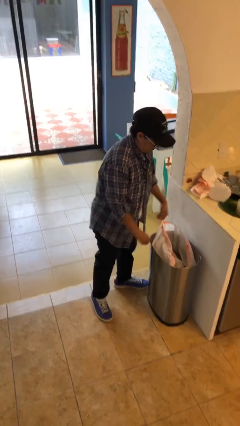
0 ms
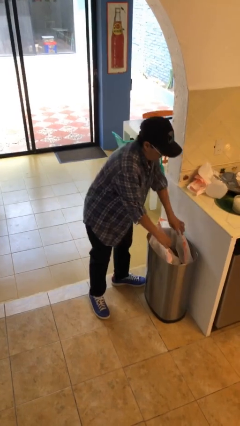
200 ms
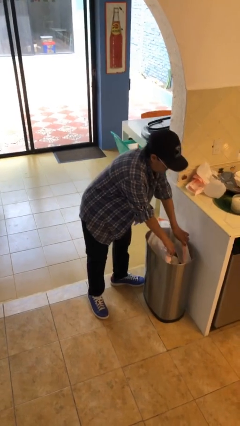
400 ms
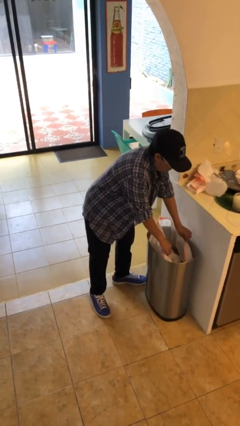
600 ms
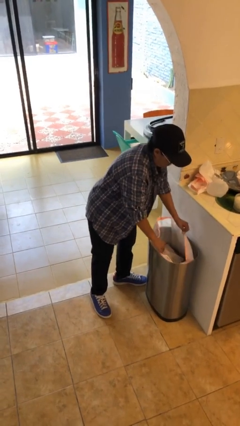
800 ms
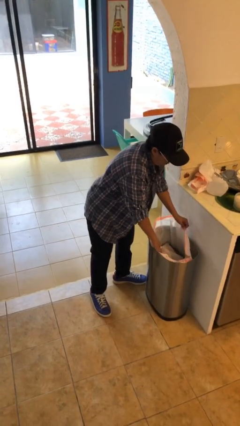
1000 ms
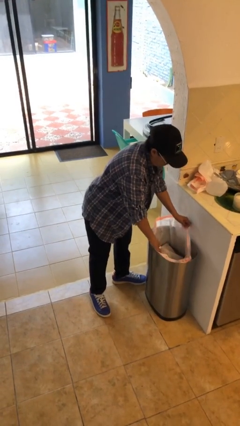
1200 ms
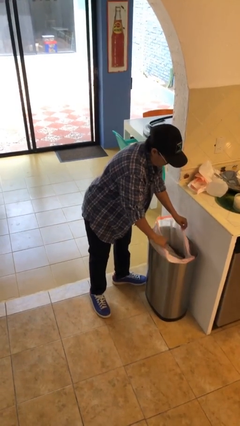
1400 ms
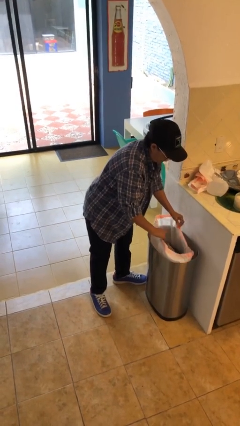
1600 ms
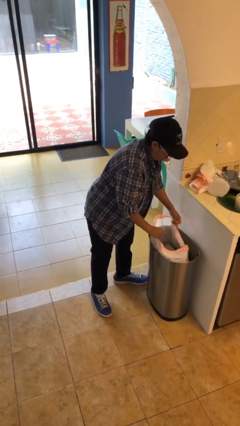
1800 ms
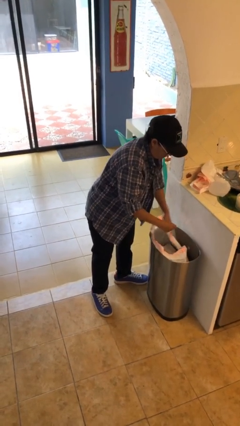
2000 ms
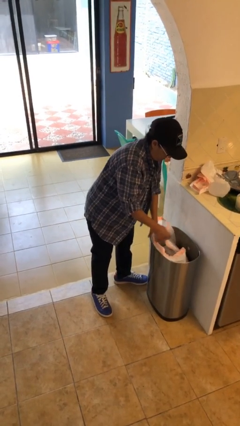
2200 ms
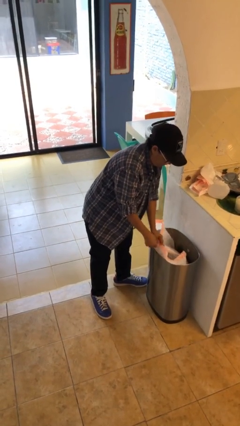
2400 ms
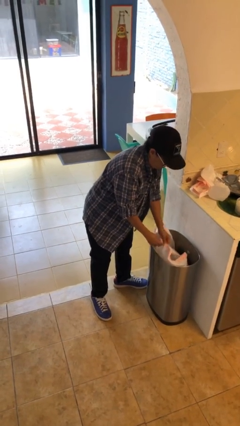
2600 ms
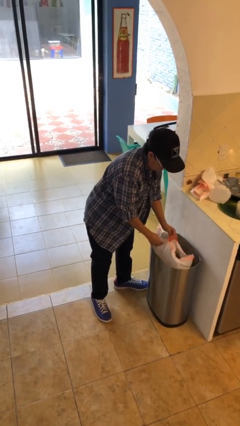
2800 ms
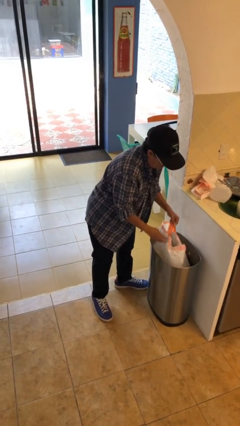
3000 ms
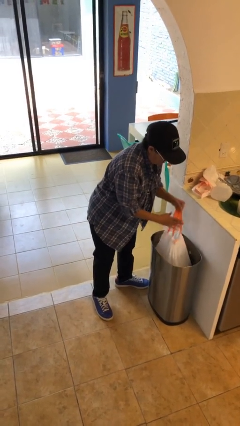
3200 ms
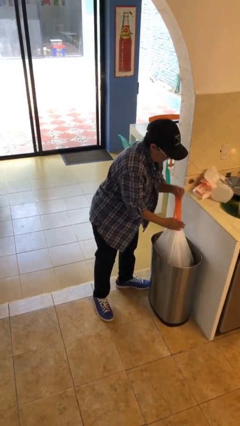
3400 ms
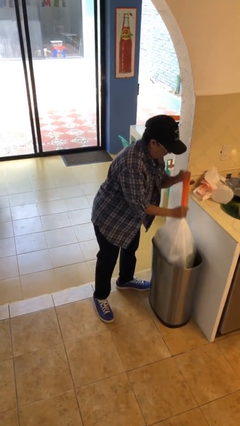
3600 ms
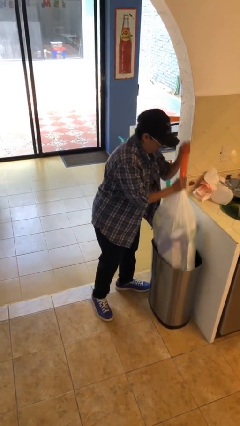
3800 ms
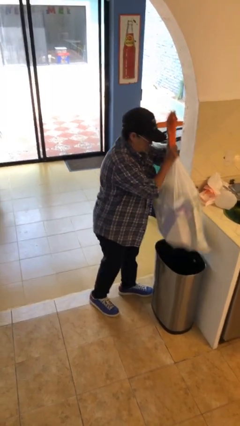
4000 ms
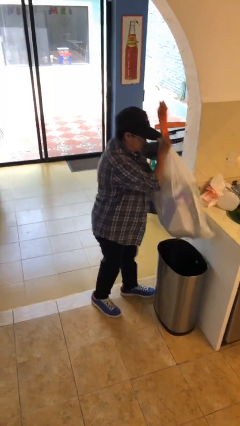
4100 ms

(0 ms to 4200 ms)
person removes trashbag from trashcan

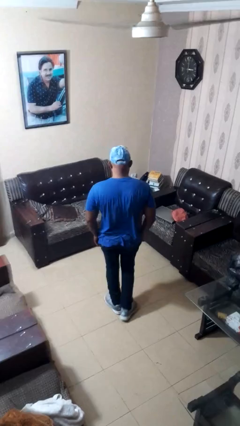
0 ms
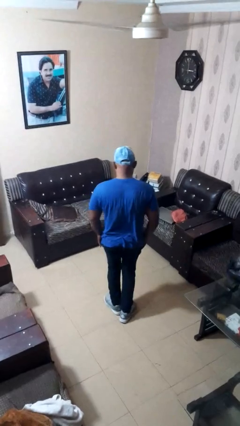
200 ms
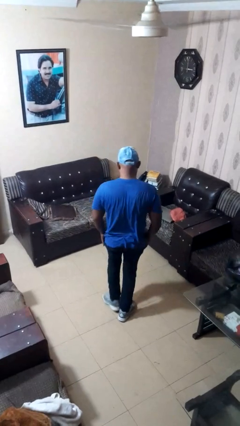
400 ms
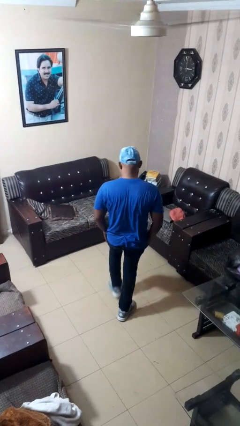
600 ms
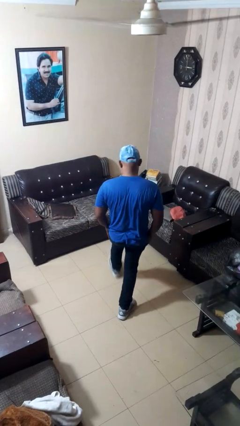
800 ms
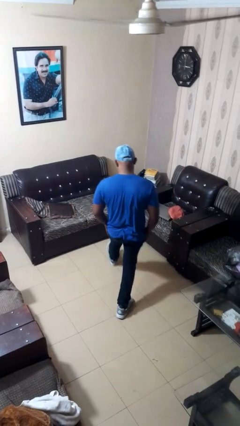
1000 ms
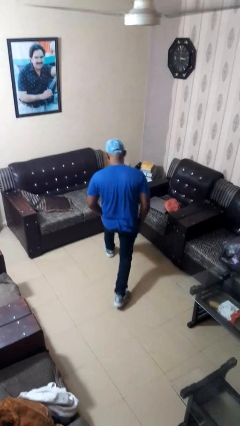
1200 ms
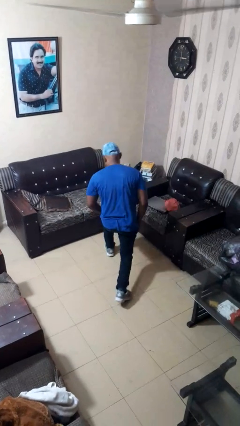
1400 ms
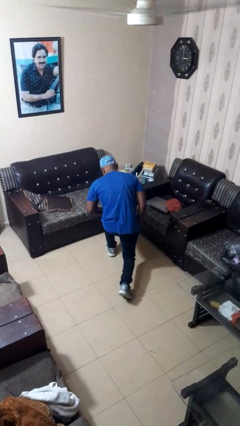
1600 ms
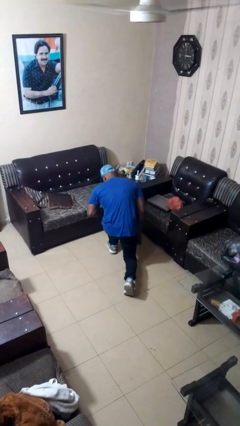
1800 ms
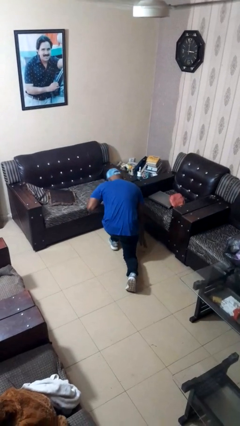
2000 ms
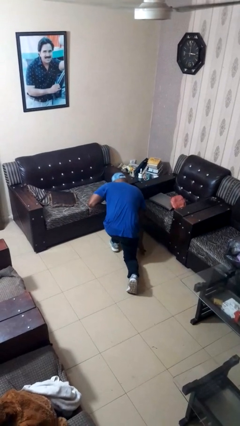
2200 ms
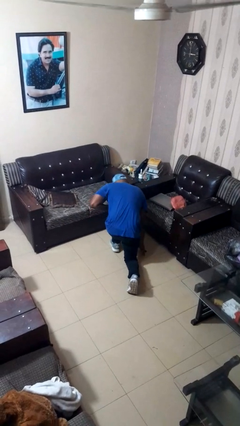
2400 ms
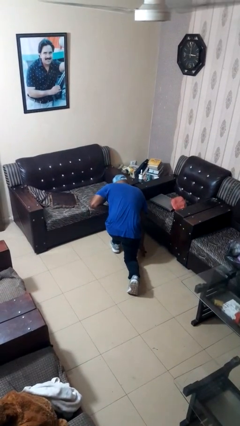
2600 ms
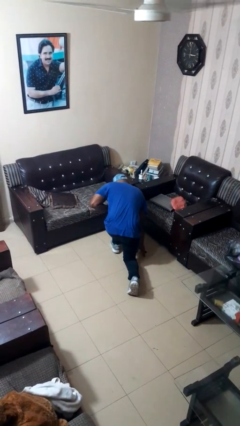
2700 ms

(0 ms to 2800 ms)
person exercises with lunges

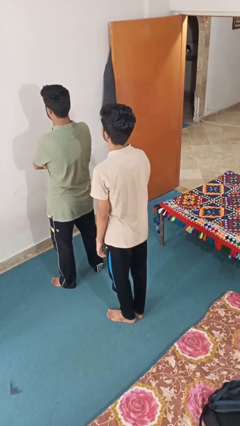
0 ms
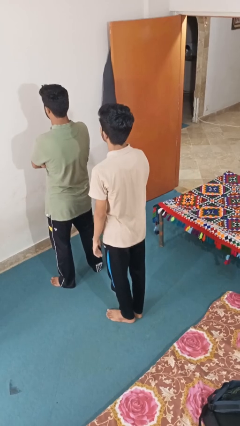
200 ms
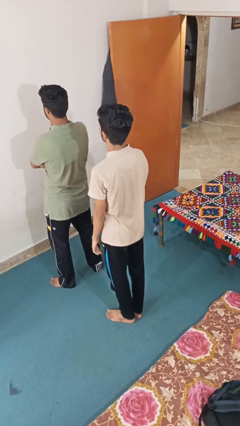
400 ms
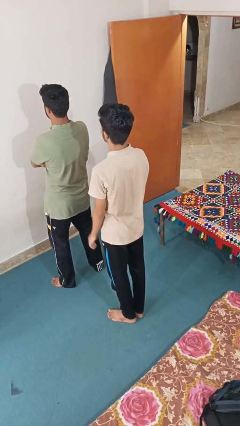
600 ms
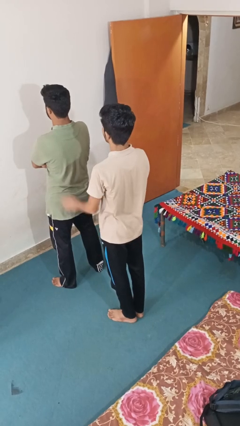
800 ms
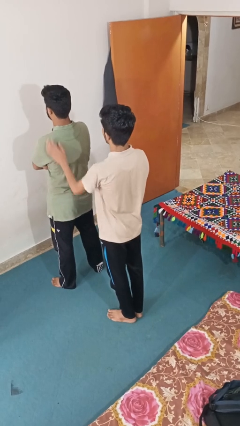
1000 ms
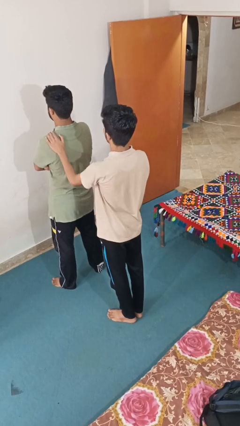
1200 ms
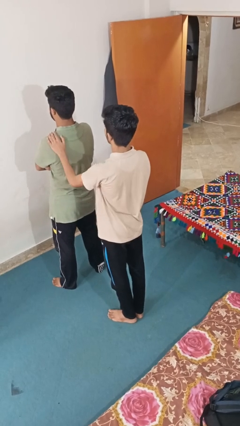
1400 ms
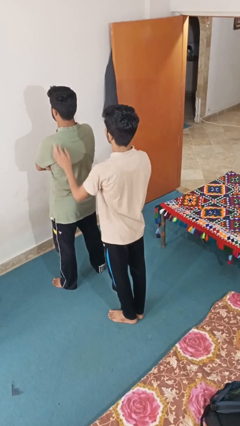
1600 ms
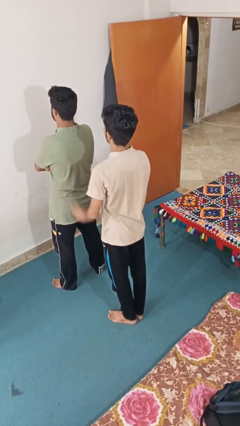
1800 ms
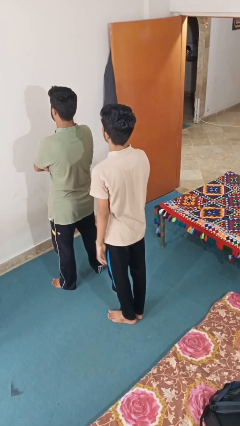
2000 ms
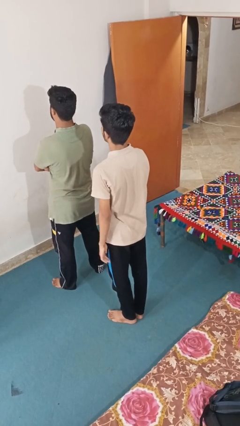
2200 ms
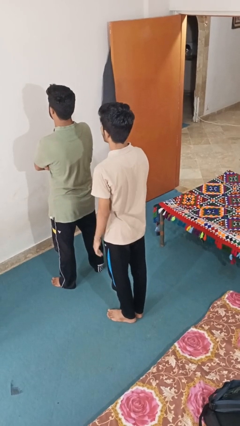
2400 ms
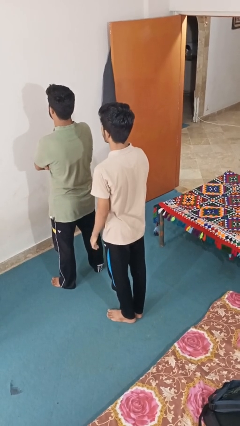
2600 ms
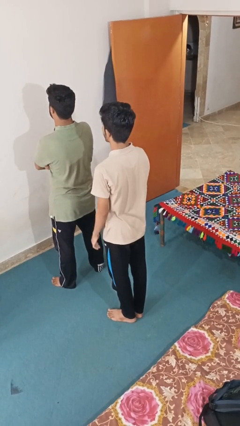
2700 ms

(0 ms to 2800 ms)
person touches back of person

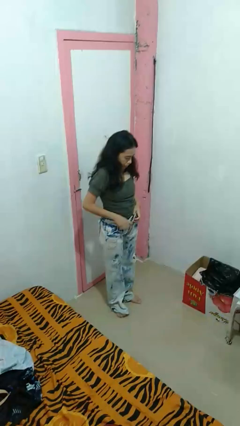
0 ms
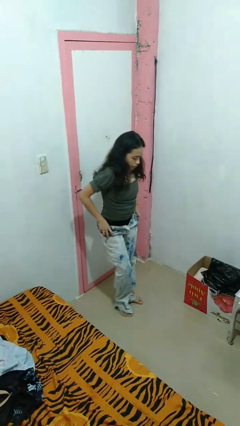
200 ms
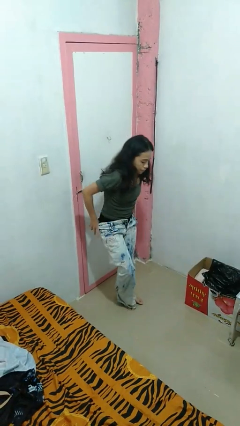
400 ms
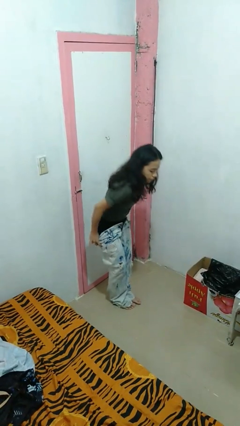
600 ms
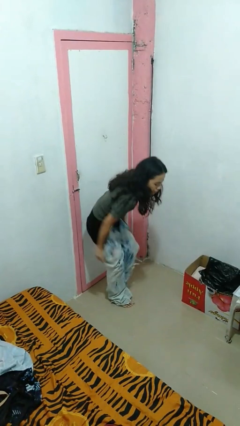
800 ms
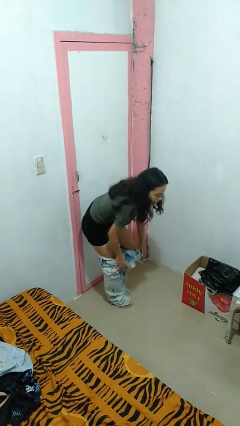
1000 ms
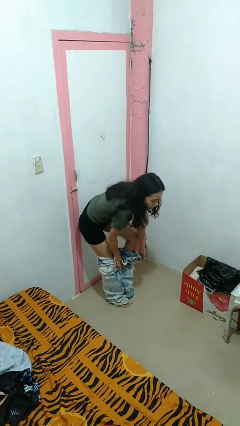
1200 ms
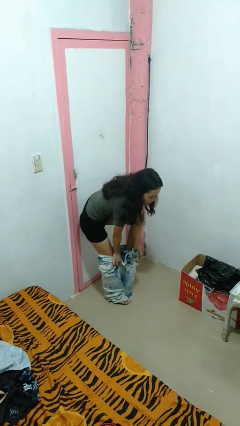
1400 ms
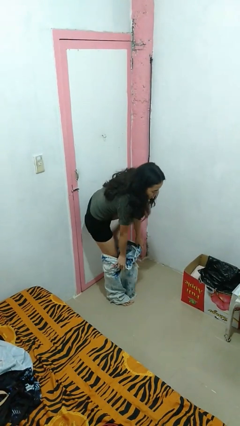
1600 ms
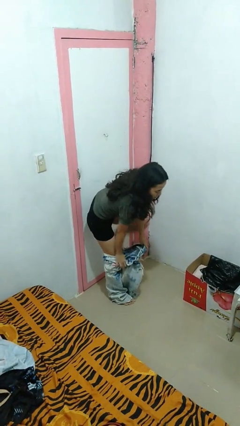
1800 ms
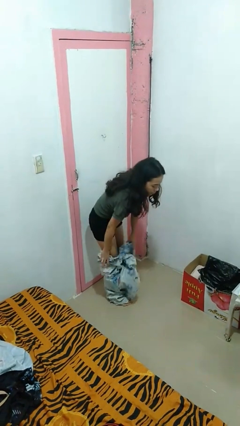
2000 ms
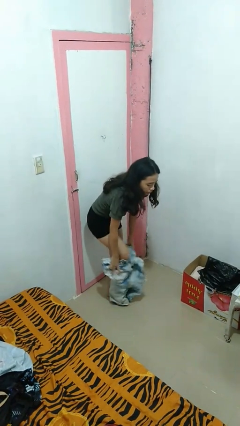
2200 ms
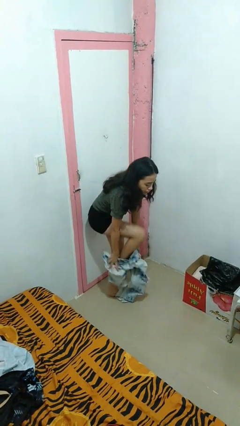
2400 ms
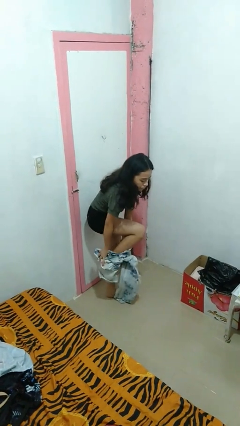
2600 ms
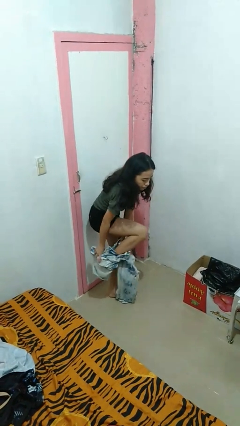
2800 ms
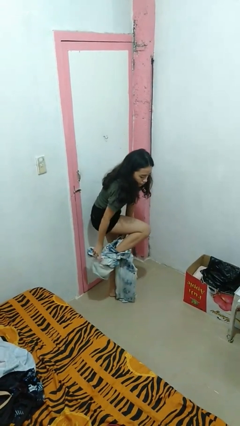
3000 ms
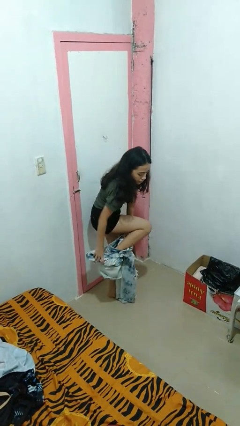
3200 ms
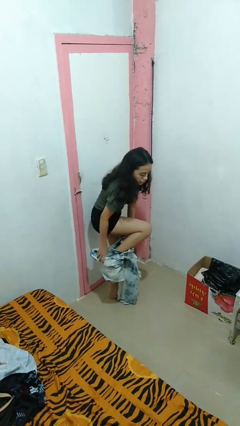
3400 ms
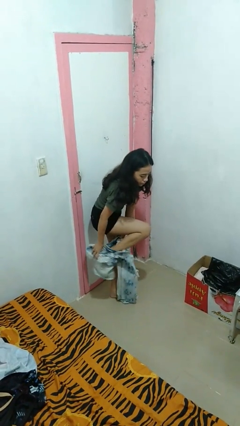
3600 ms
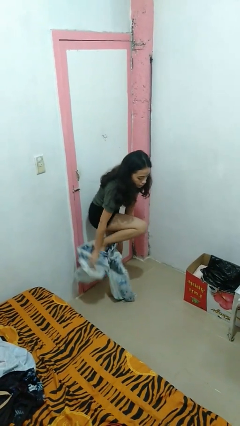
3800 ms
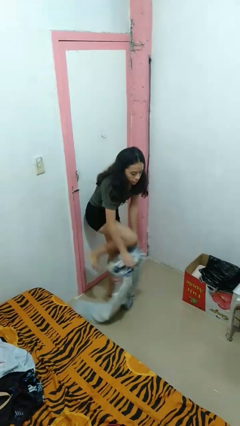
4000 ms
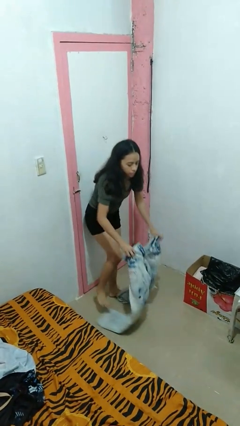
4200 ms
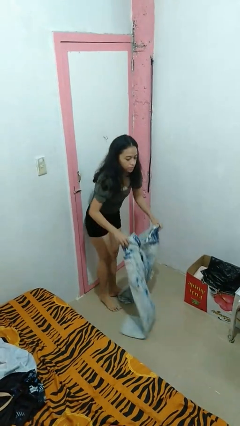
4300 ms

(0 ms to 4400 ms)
person takes off pants

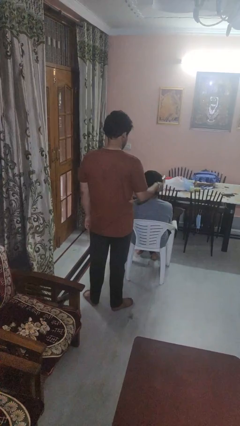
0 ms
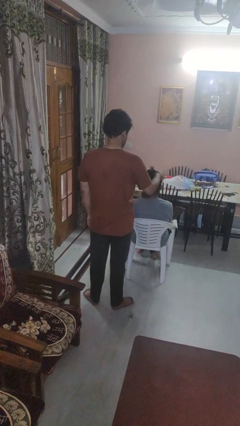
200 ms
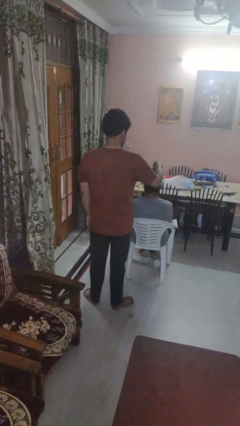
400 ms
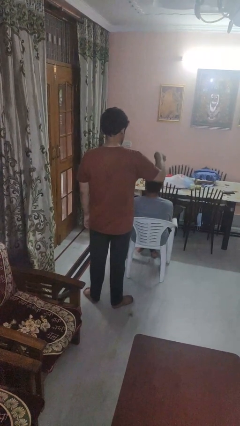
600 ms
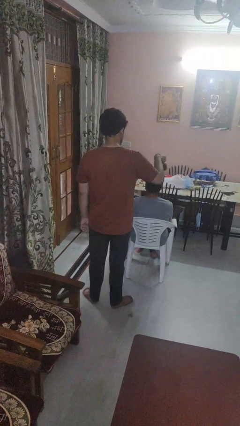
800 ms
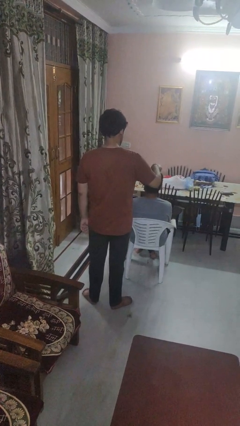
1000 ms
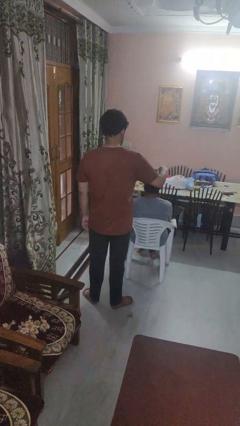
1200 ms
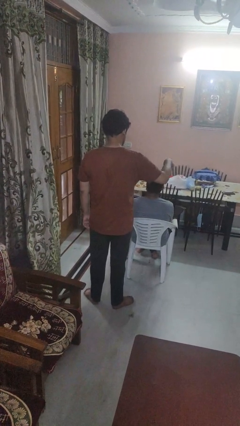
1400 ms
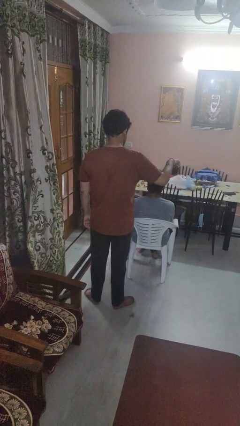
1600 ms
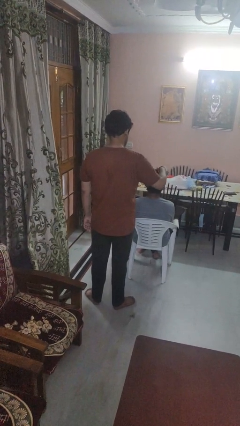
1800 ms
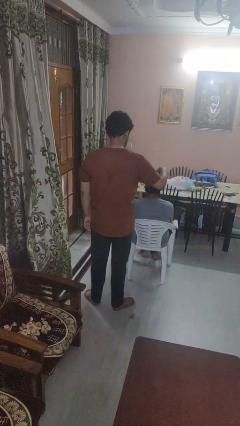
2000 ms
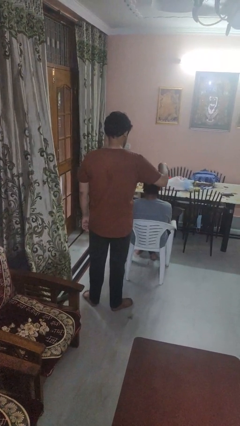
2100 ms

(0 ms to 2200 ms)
person brushes hair of person

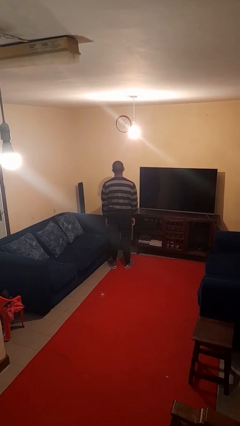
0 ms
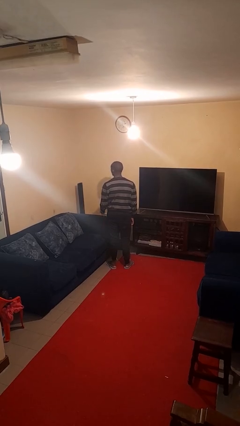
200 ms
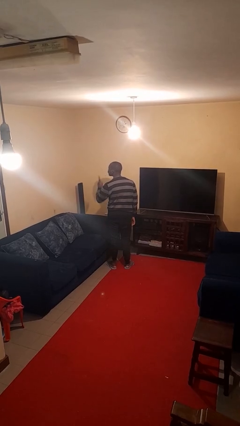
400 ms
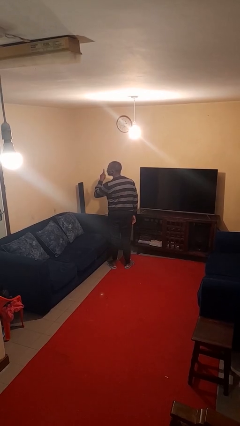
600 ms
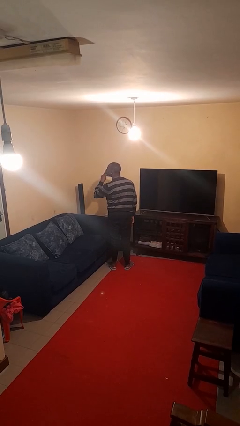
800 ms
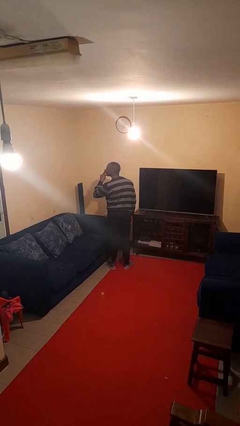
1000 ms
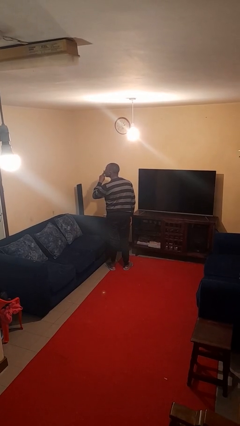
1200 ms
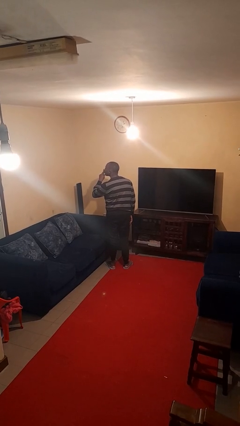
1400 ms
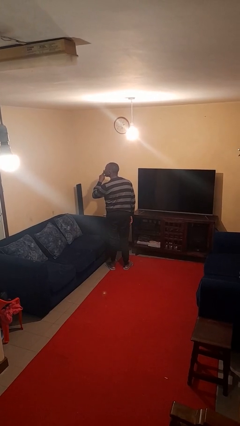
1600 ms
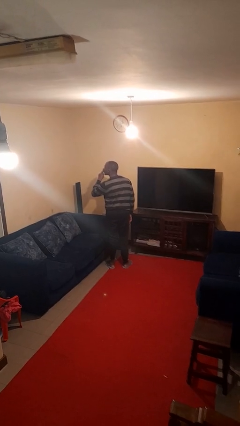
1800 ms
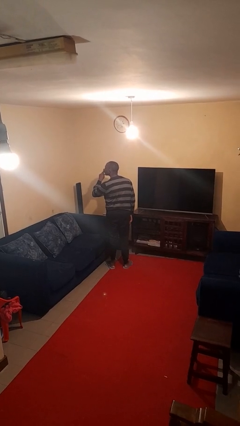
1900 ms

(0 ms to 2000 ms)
person gestures be quiet
